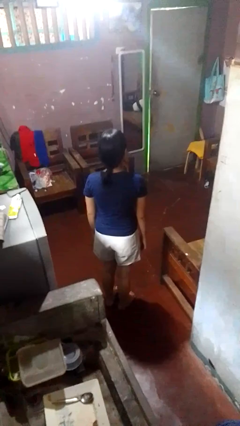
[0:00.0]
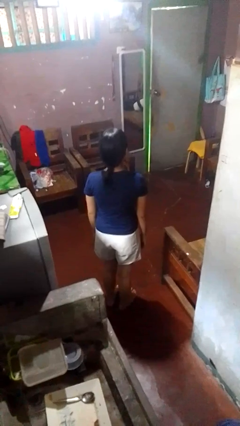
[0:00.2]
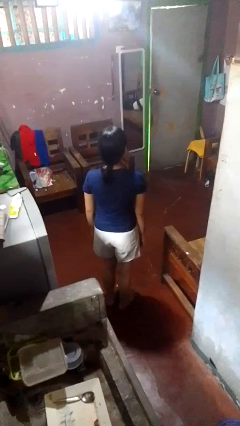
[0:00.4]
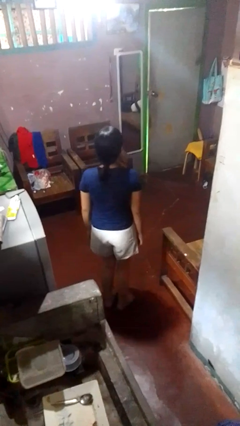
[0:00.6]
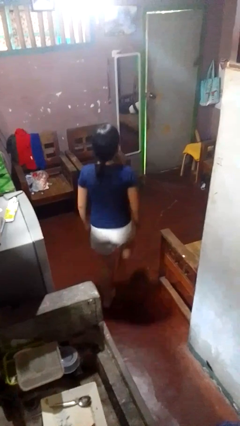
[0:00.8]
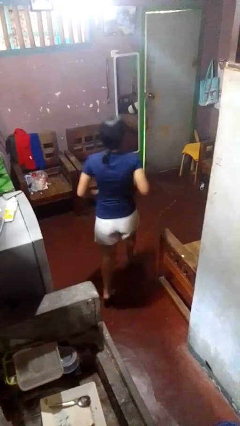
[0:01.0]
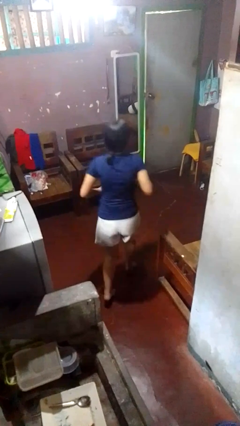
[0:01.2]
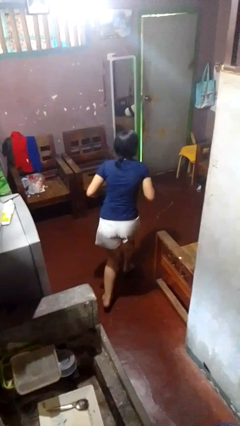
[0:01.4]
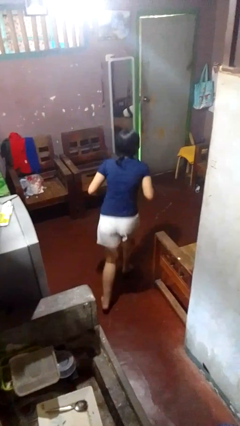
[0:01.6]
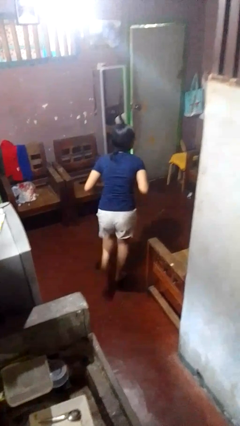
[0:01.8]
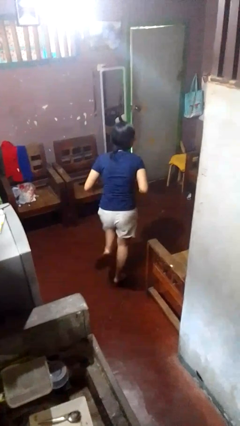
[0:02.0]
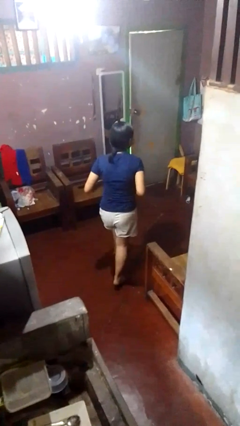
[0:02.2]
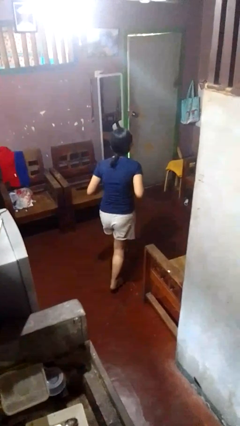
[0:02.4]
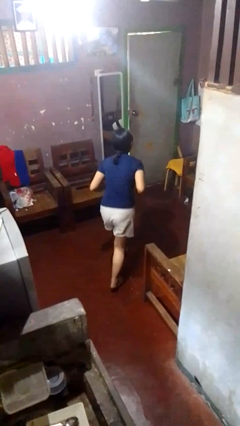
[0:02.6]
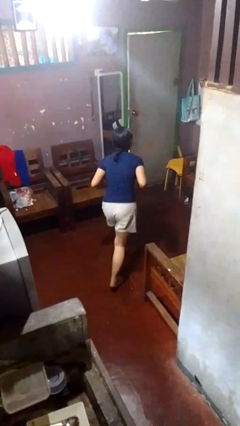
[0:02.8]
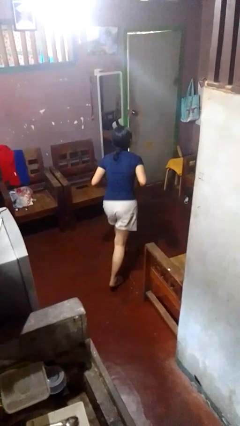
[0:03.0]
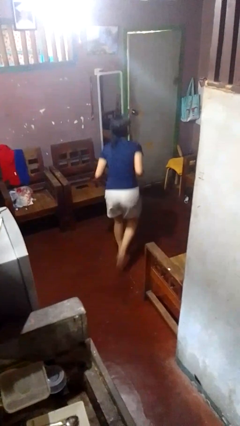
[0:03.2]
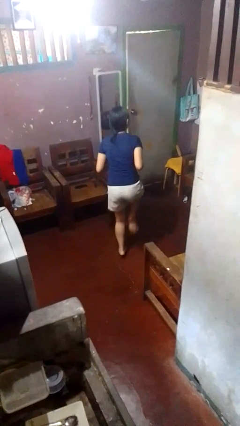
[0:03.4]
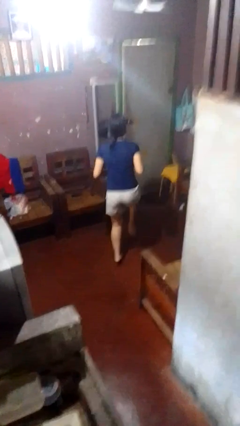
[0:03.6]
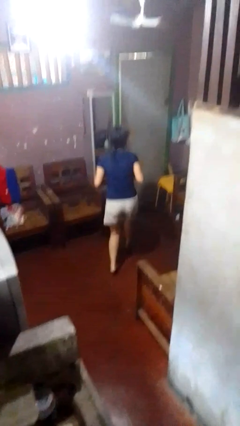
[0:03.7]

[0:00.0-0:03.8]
person walks tiptoe

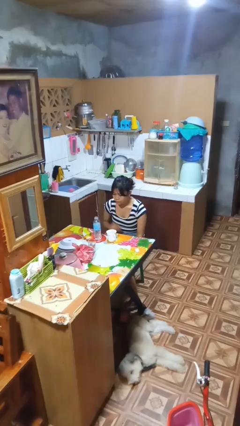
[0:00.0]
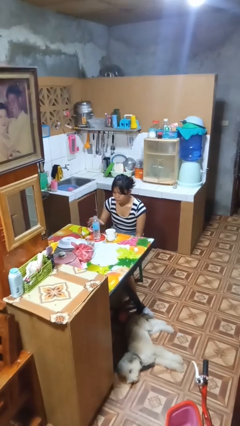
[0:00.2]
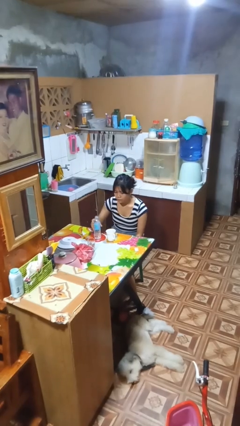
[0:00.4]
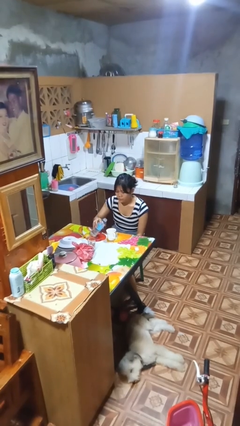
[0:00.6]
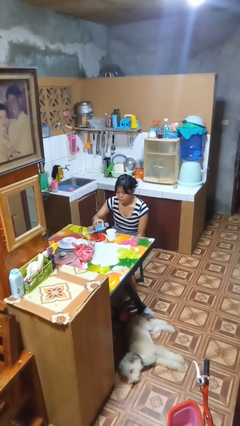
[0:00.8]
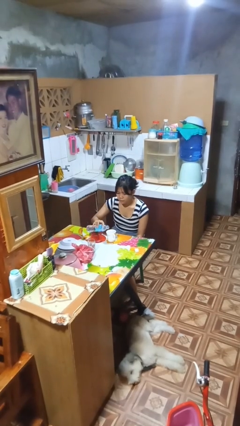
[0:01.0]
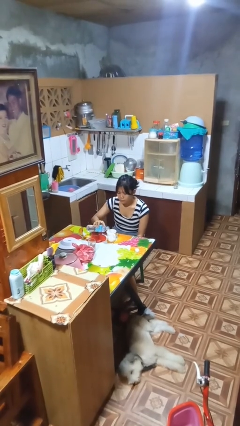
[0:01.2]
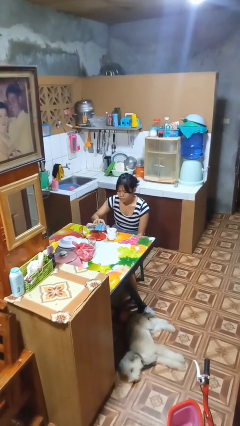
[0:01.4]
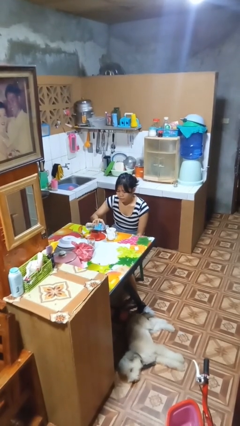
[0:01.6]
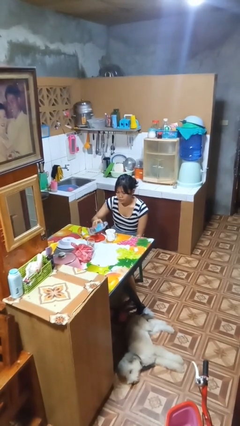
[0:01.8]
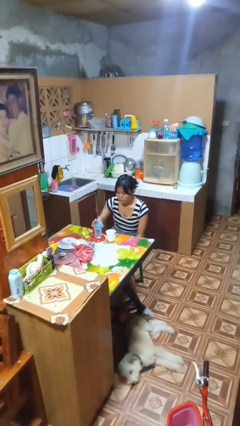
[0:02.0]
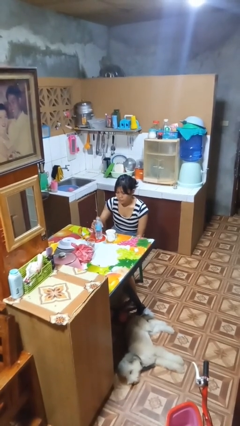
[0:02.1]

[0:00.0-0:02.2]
person pours liquid into cup

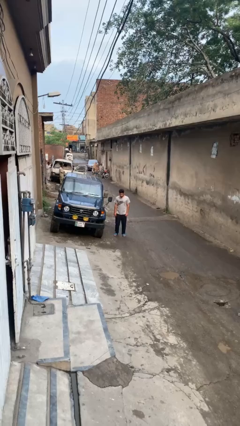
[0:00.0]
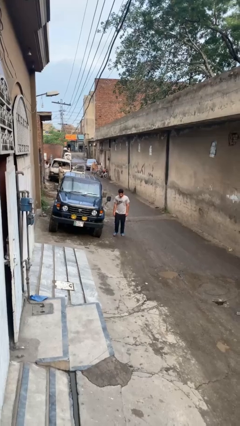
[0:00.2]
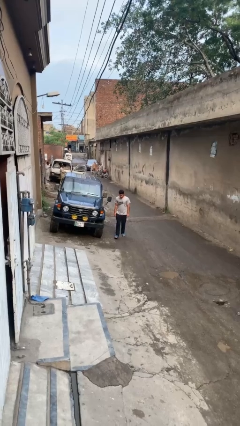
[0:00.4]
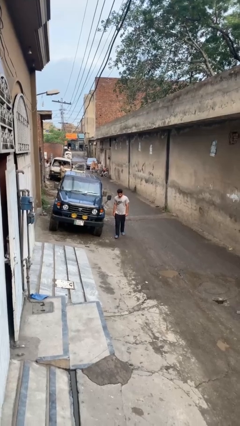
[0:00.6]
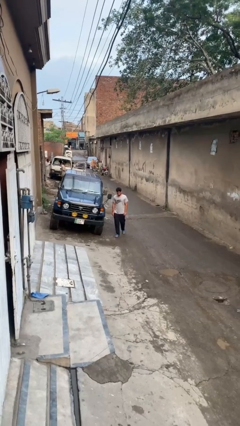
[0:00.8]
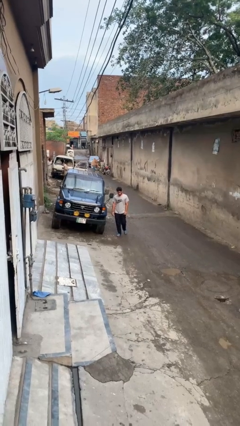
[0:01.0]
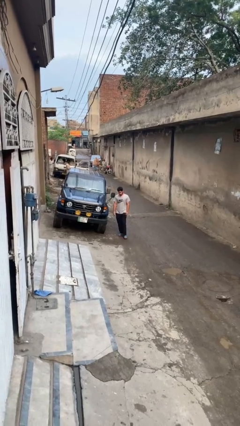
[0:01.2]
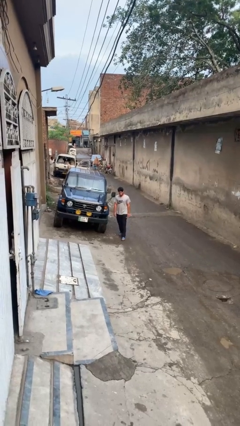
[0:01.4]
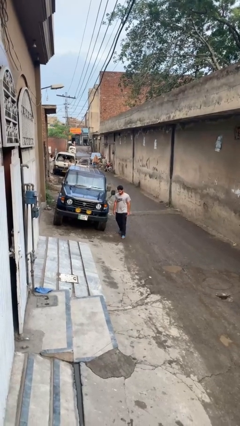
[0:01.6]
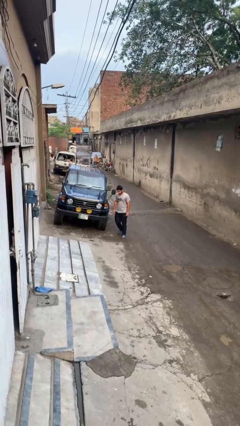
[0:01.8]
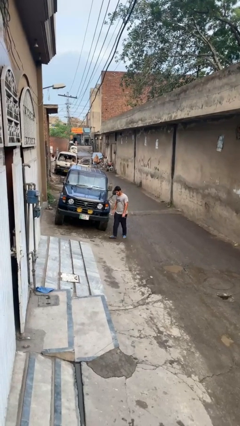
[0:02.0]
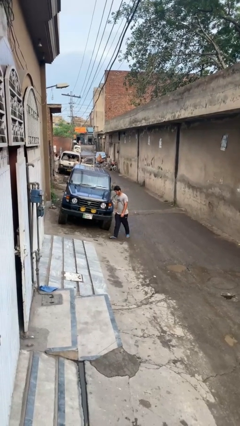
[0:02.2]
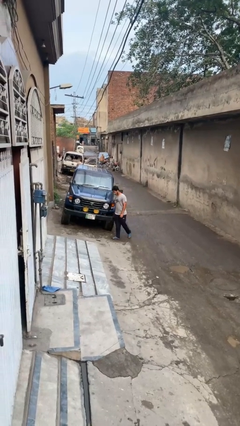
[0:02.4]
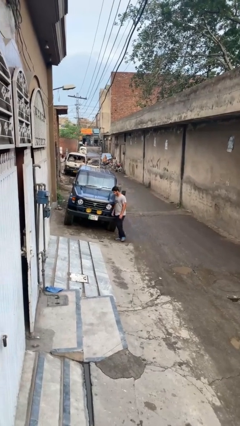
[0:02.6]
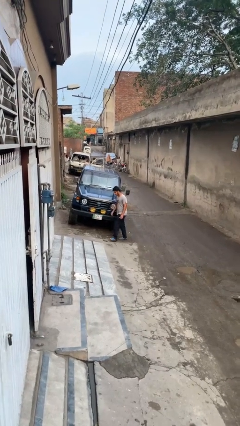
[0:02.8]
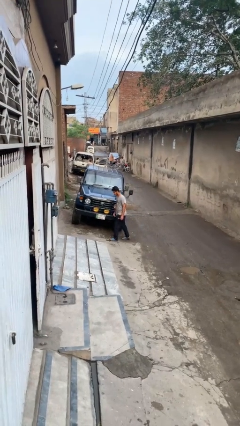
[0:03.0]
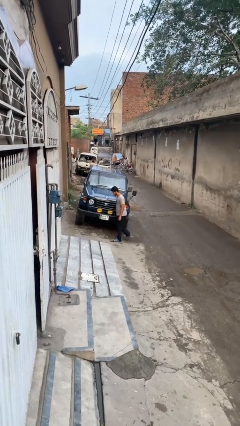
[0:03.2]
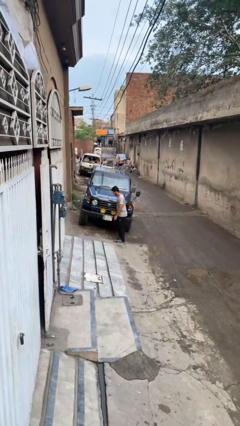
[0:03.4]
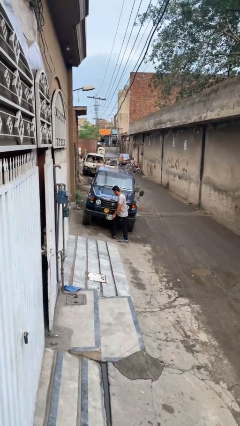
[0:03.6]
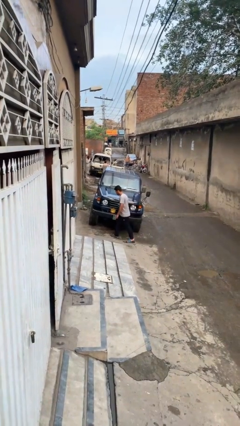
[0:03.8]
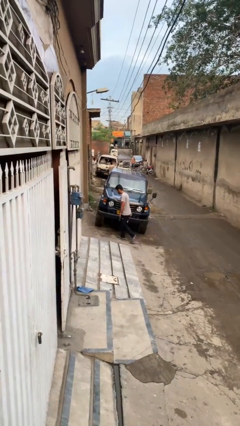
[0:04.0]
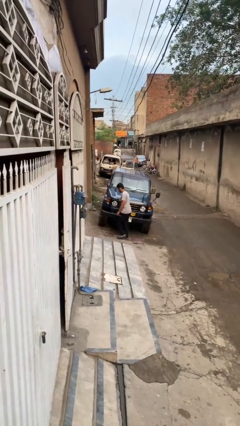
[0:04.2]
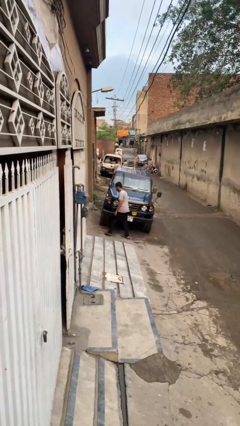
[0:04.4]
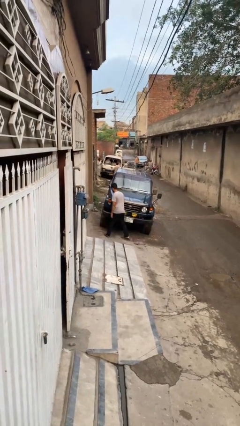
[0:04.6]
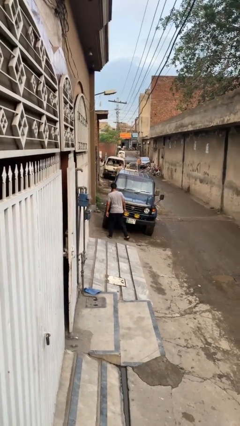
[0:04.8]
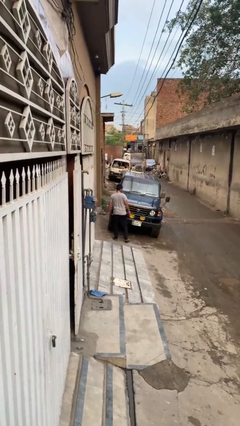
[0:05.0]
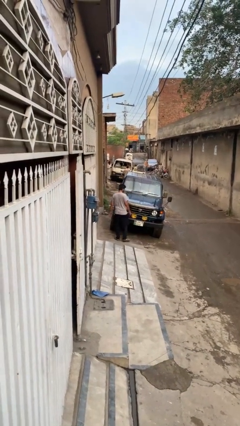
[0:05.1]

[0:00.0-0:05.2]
person walks around car

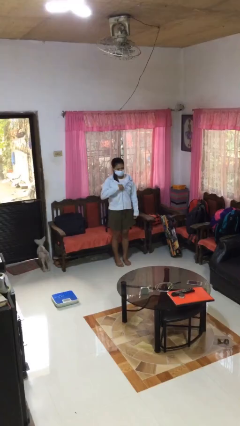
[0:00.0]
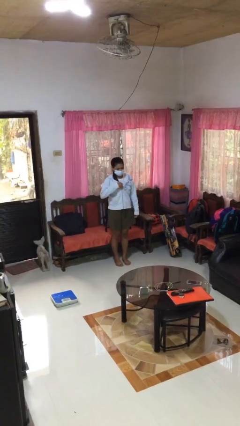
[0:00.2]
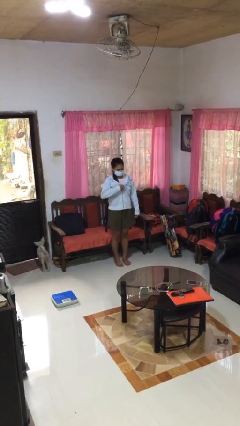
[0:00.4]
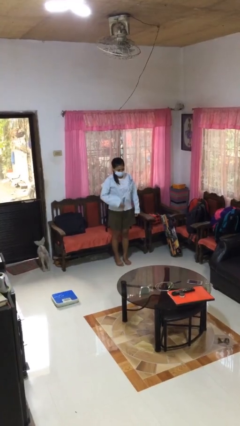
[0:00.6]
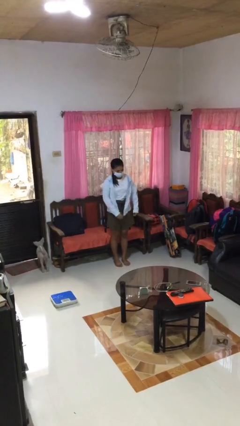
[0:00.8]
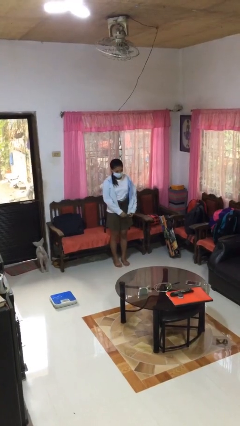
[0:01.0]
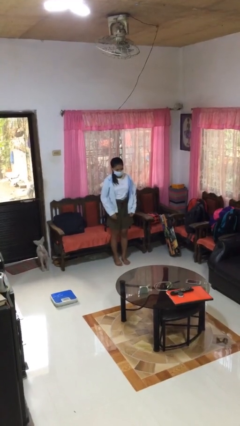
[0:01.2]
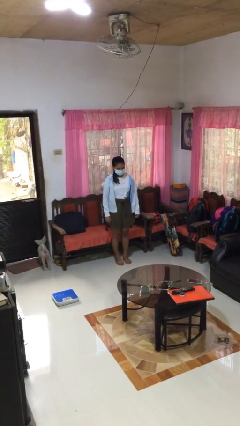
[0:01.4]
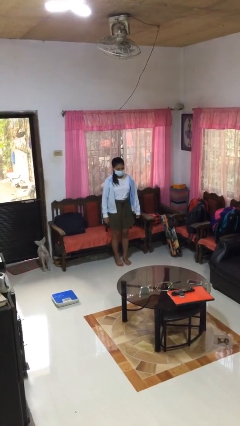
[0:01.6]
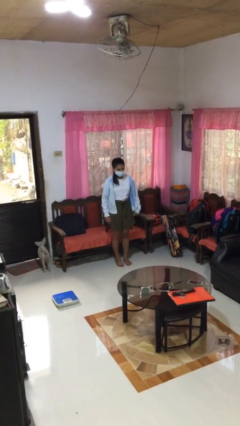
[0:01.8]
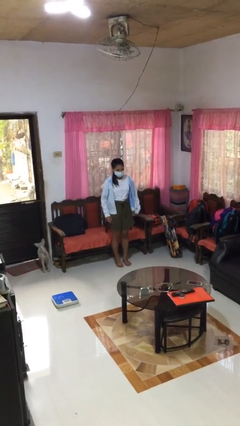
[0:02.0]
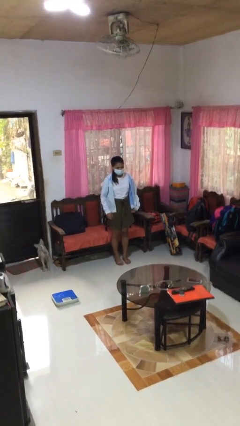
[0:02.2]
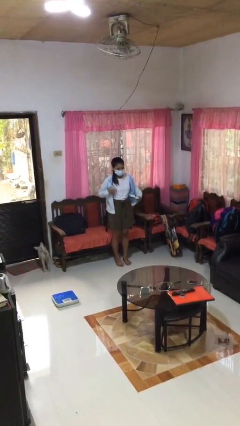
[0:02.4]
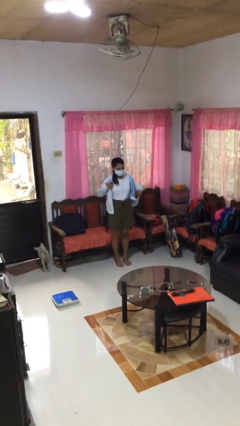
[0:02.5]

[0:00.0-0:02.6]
person unzips jacket

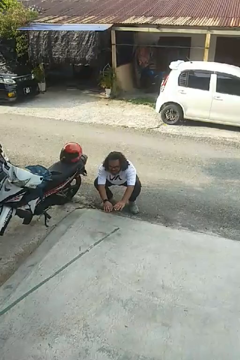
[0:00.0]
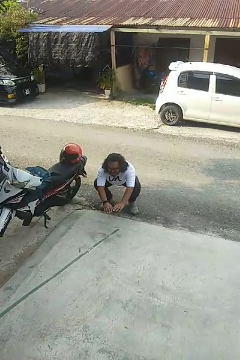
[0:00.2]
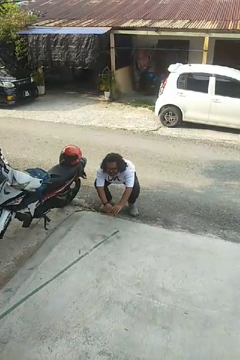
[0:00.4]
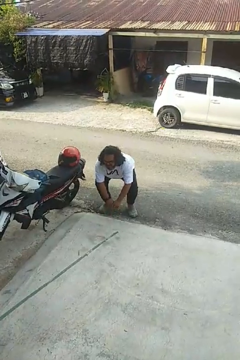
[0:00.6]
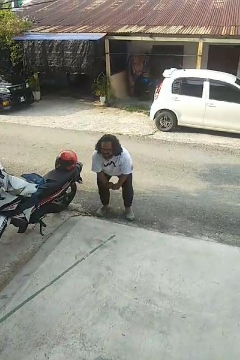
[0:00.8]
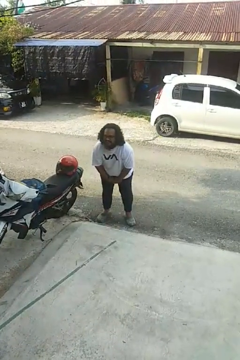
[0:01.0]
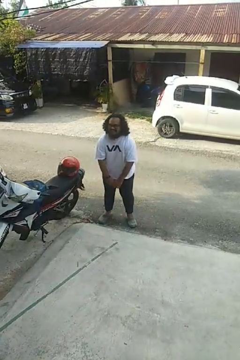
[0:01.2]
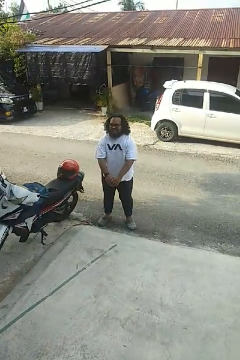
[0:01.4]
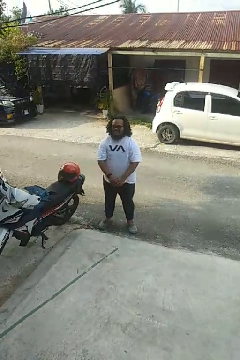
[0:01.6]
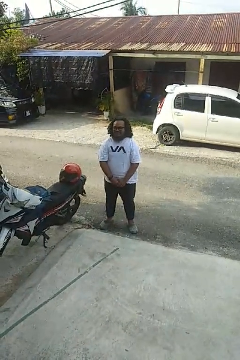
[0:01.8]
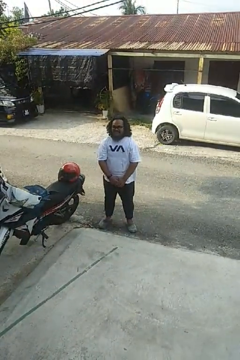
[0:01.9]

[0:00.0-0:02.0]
person stands up

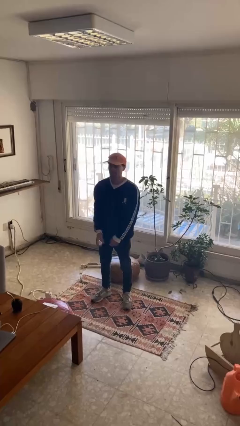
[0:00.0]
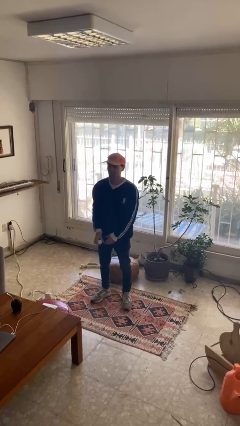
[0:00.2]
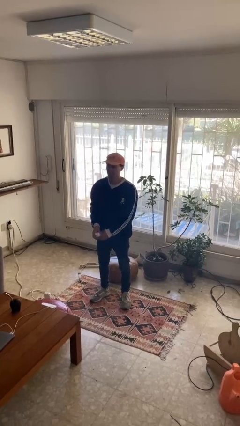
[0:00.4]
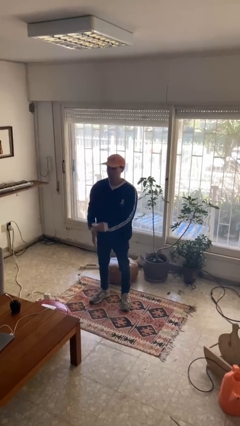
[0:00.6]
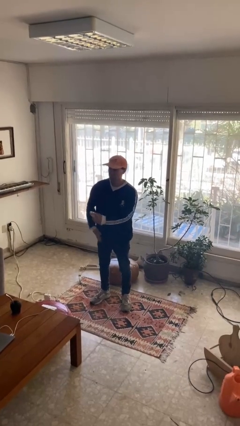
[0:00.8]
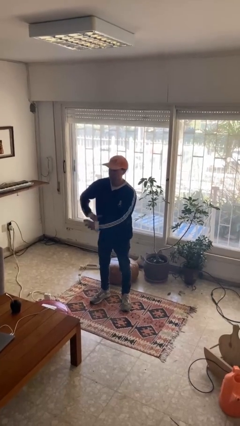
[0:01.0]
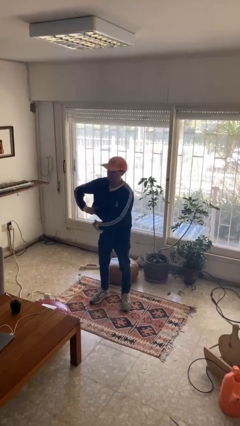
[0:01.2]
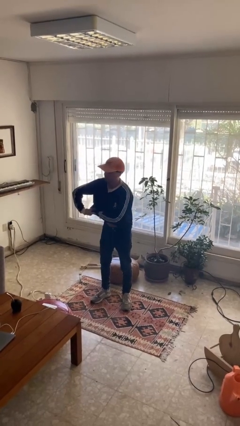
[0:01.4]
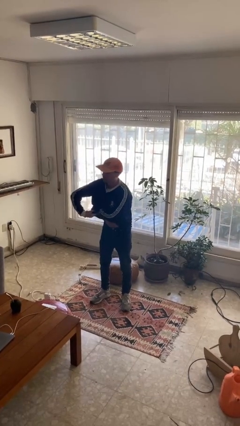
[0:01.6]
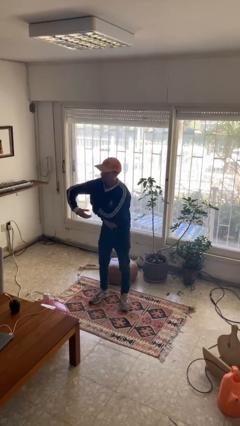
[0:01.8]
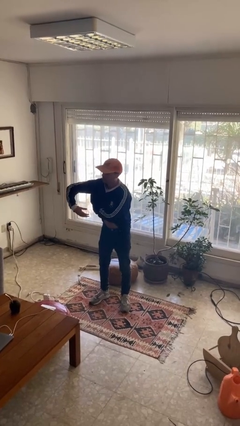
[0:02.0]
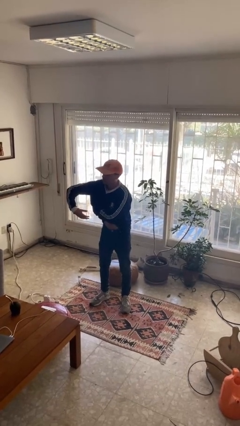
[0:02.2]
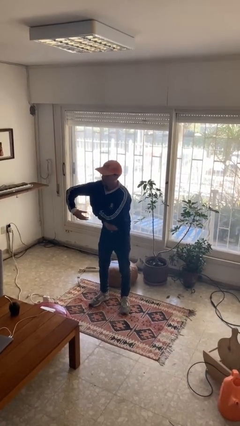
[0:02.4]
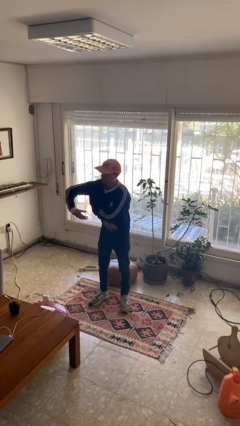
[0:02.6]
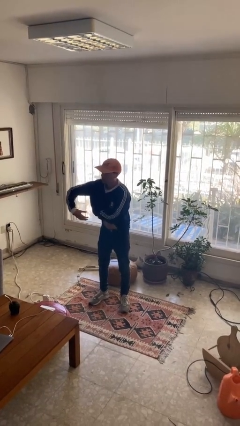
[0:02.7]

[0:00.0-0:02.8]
person applies deodorant
